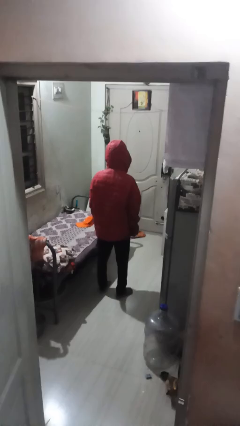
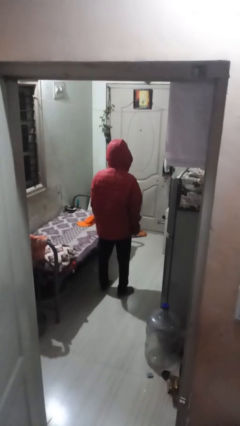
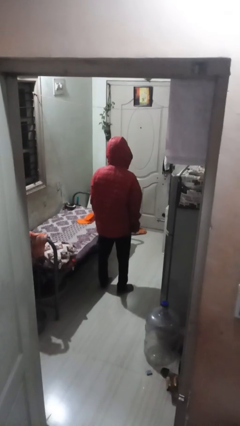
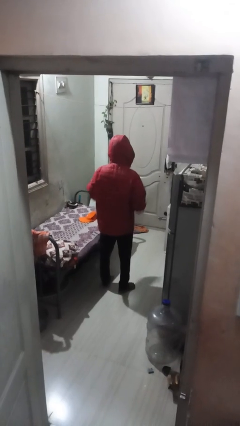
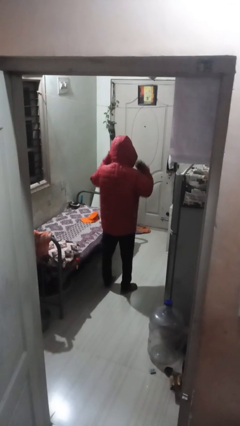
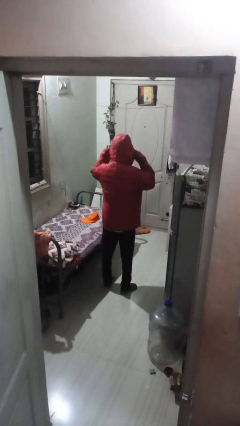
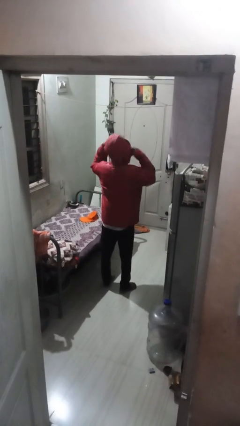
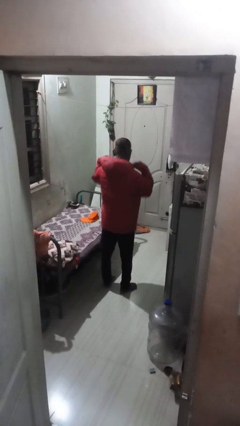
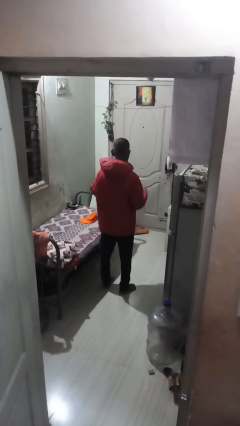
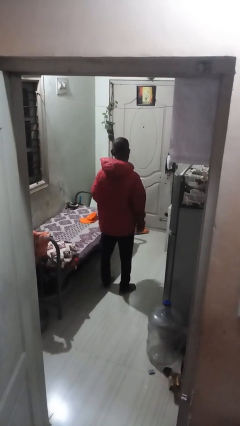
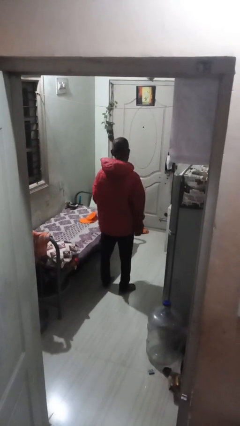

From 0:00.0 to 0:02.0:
person takes off hoodie

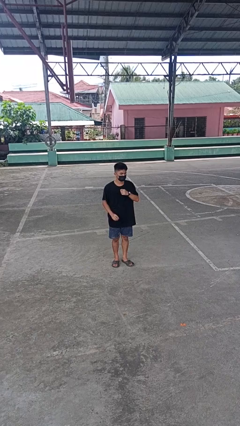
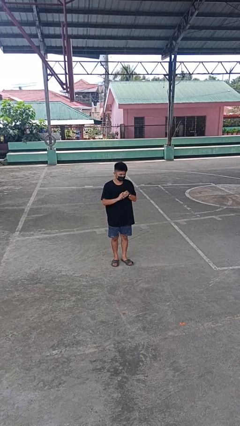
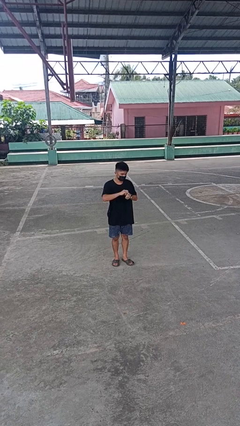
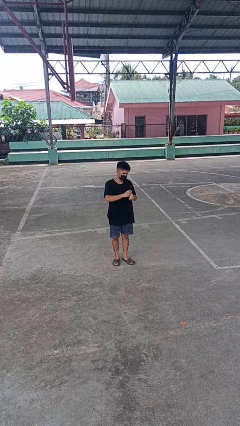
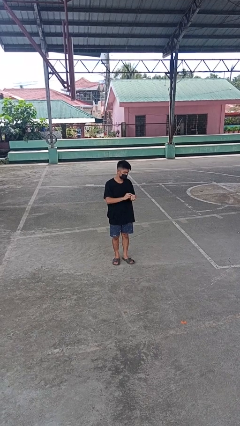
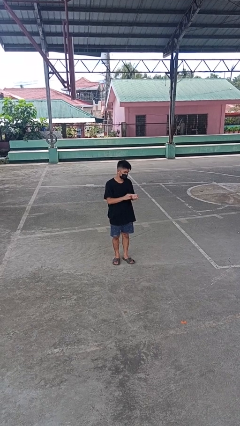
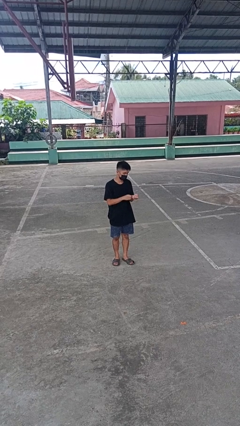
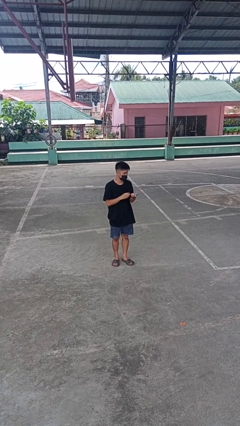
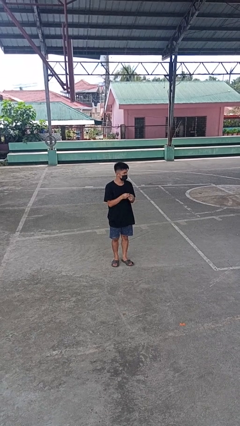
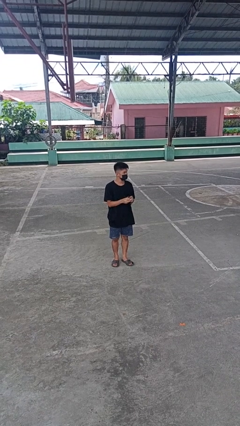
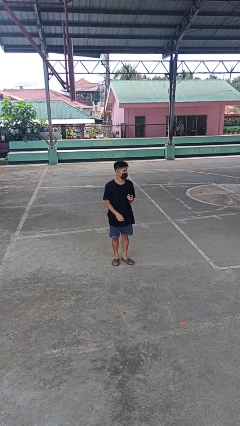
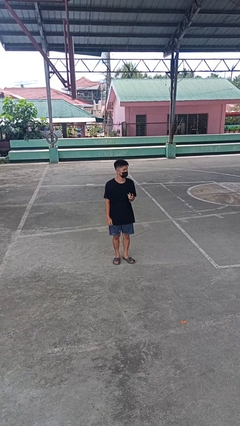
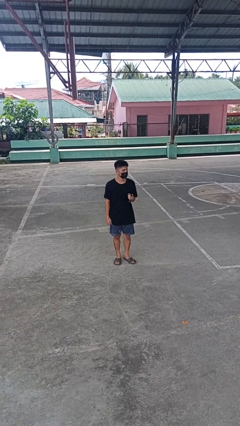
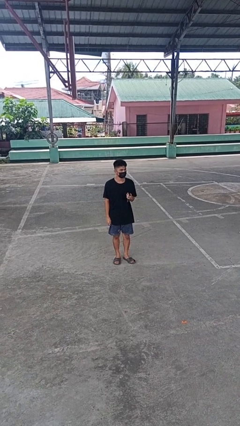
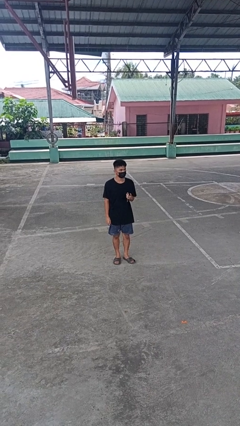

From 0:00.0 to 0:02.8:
person takes off wristwatch

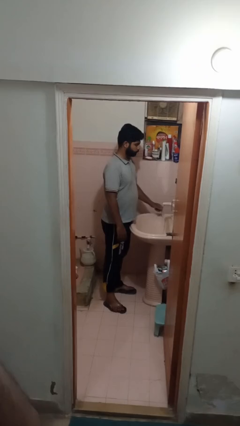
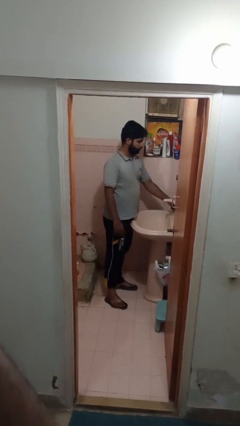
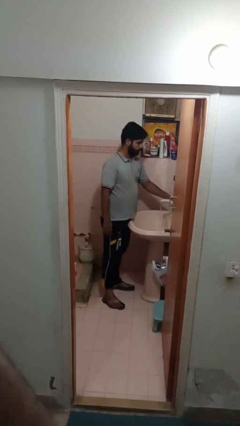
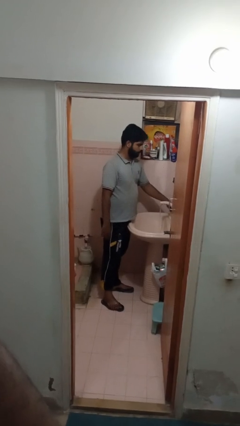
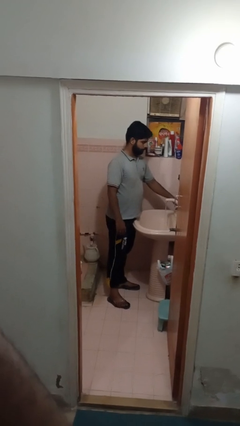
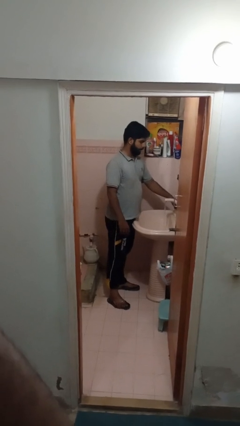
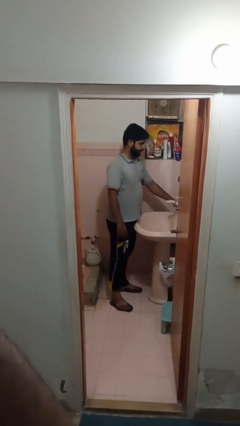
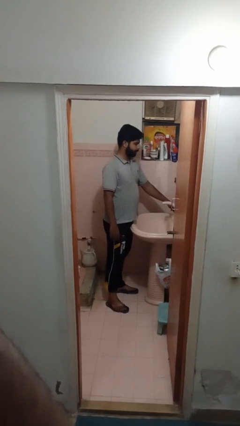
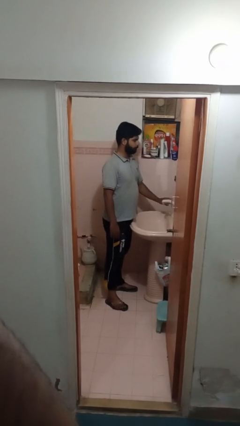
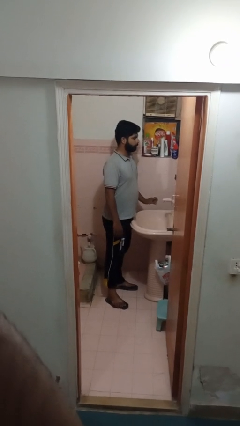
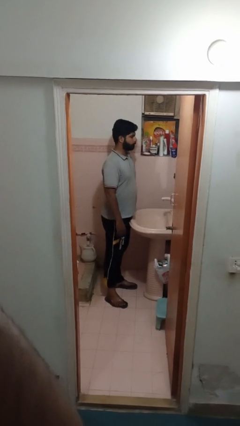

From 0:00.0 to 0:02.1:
person turns off faucet

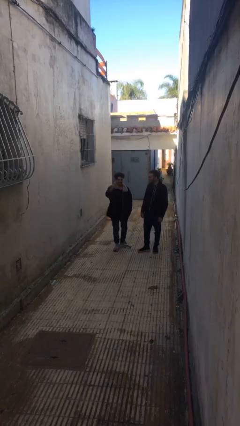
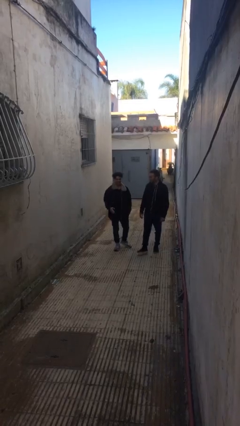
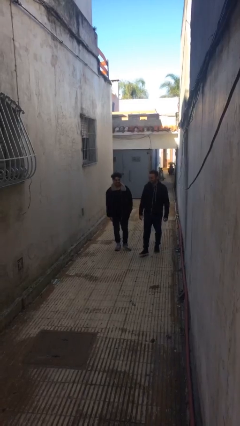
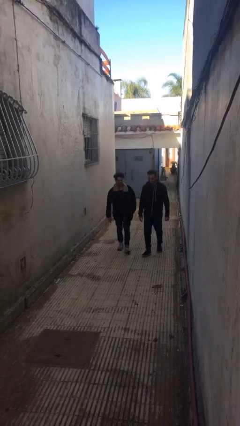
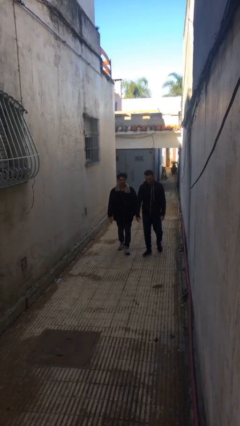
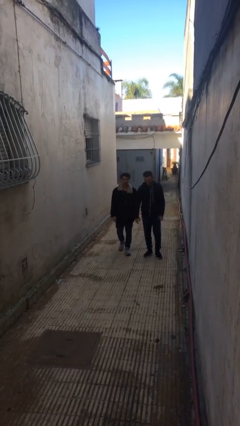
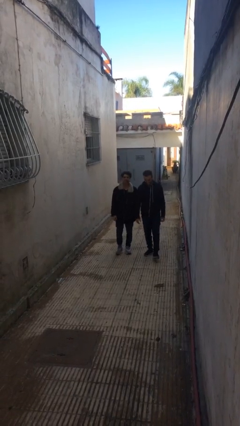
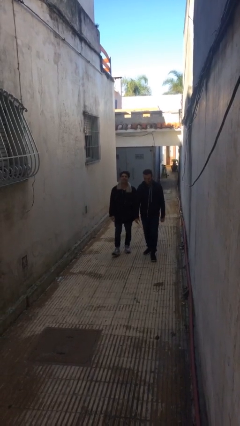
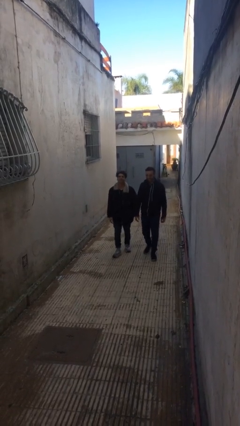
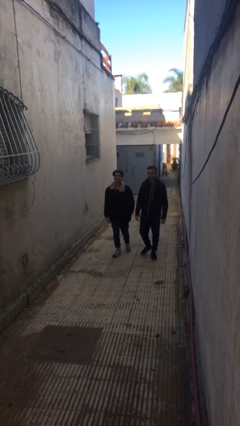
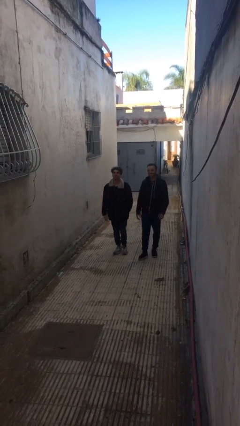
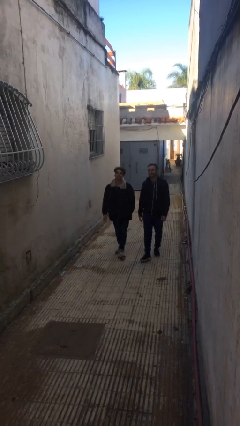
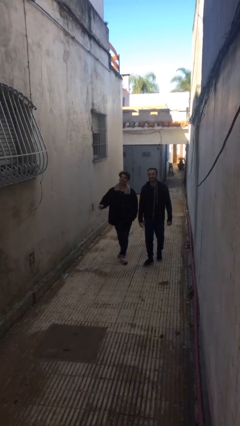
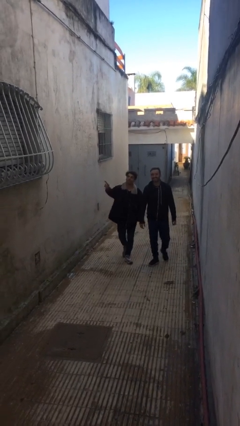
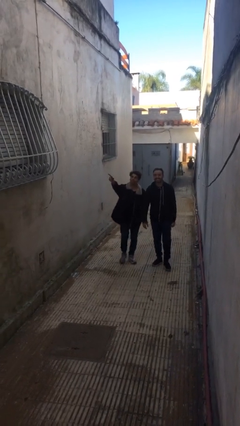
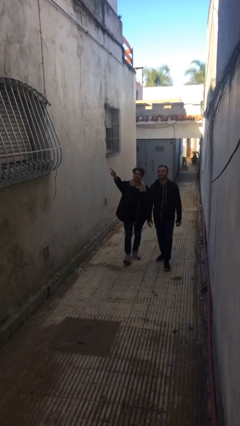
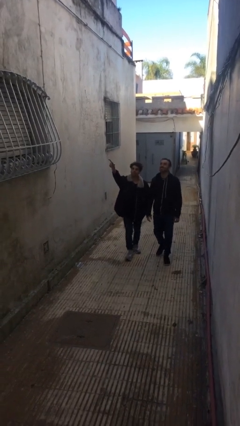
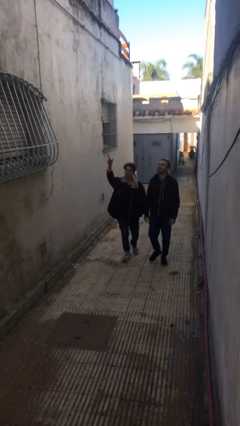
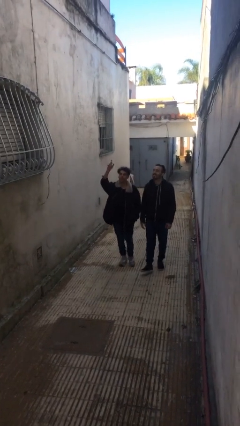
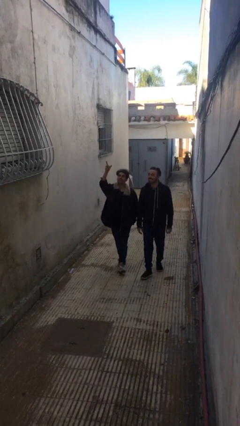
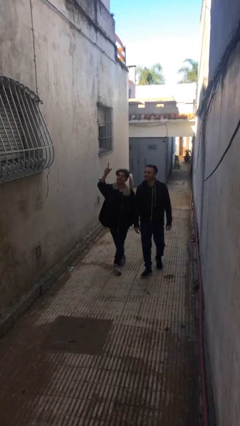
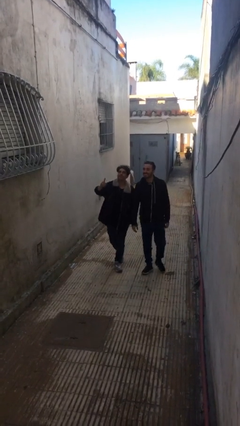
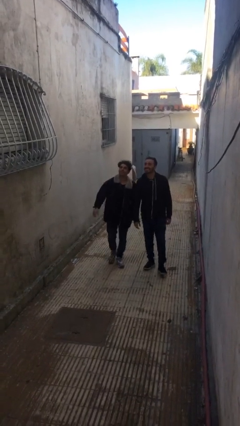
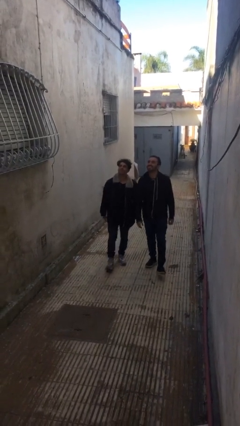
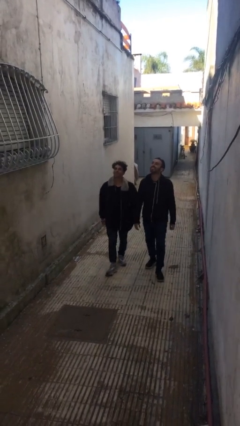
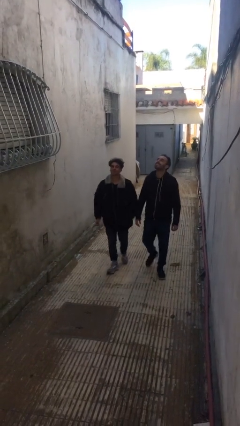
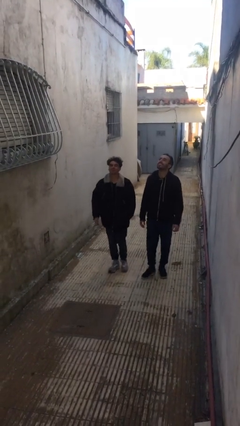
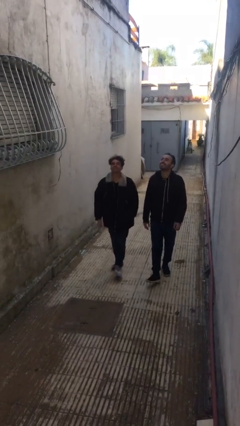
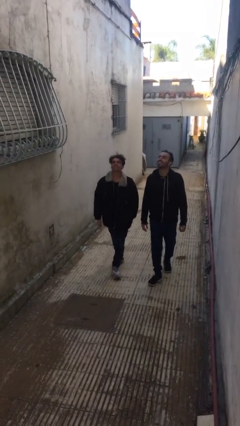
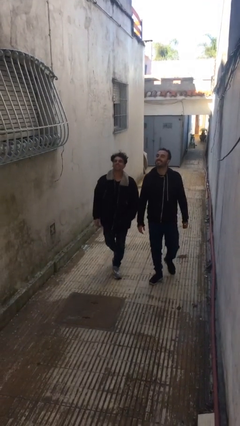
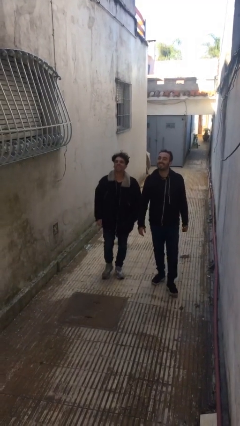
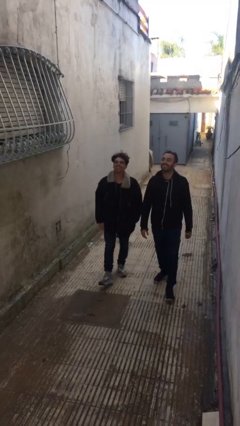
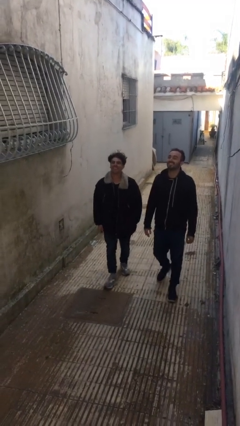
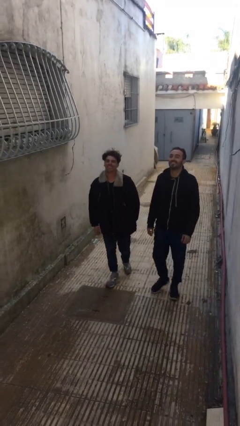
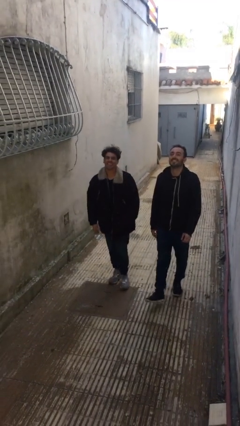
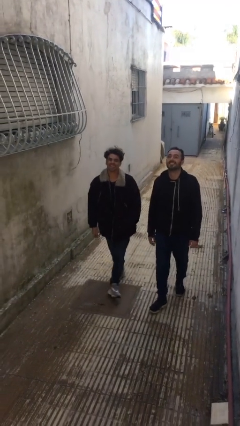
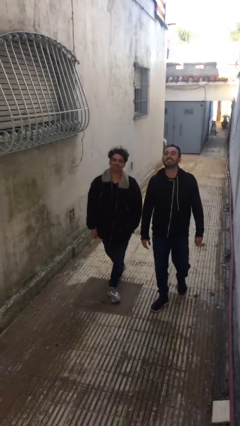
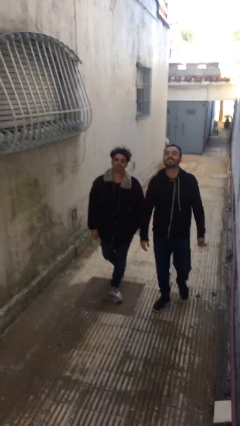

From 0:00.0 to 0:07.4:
person talks to person

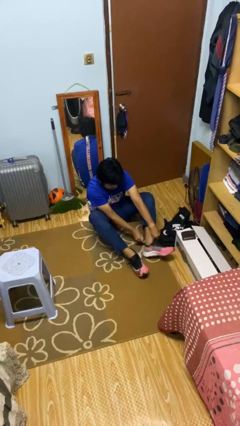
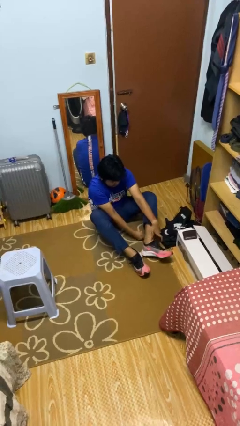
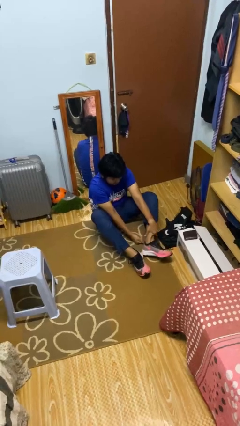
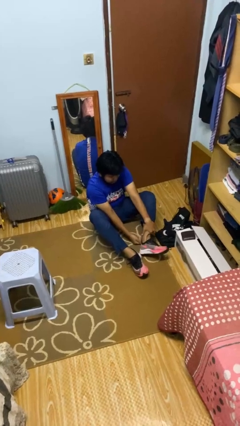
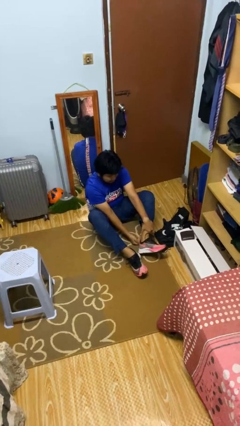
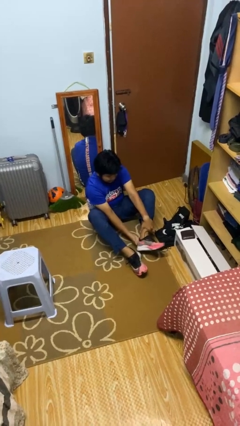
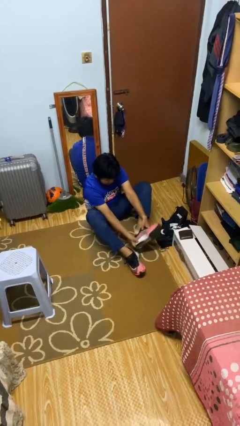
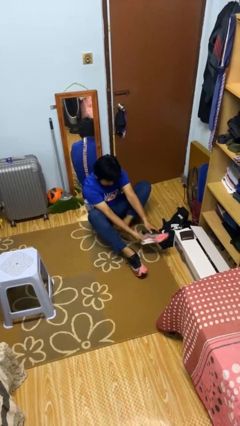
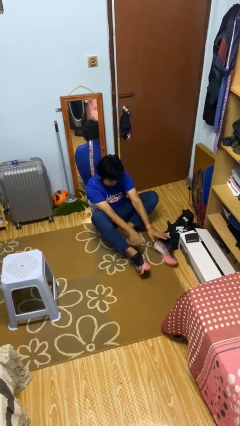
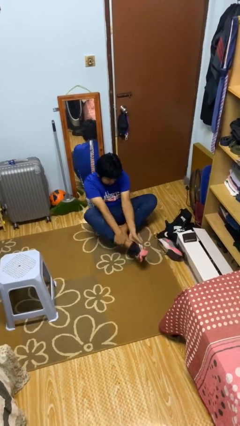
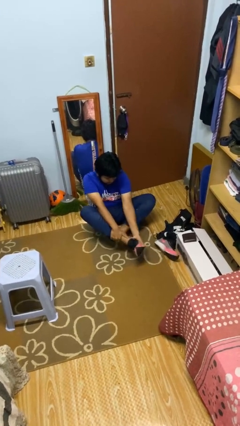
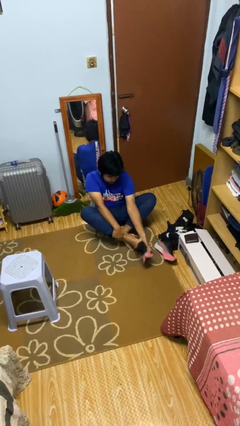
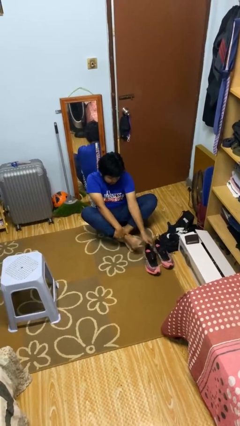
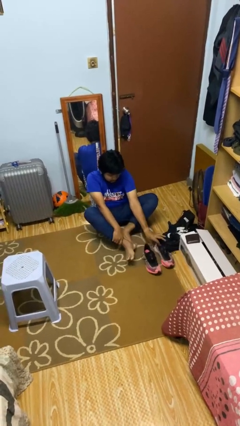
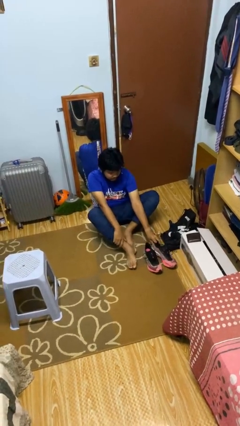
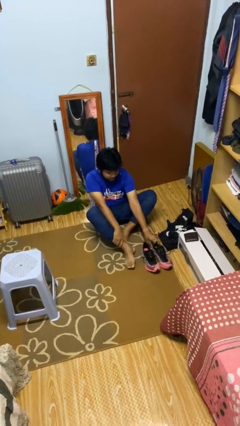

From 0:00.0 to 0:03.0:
person takes off shoes
